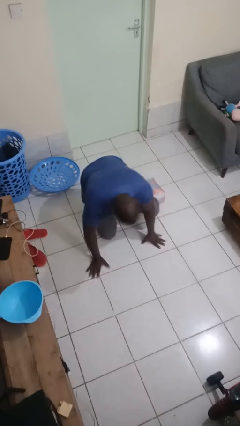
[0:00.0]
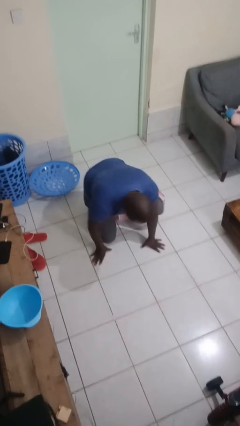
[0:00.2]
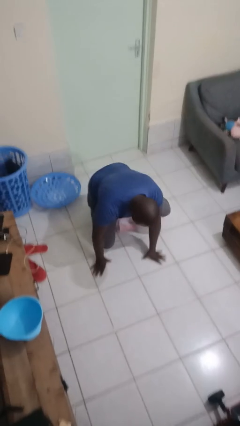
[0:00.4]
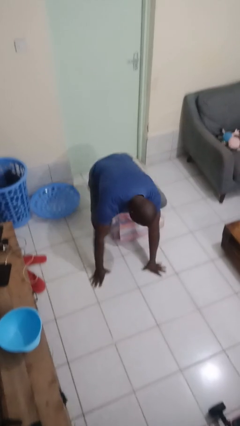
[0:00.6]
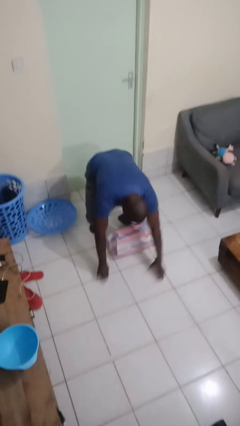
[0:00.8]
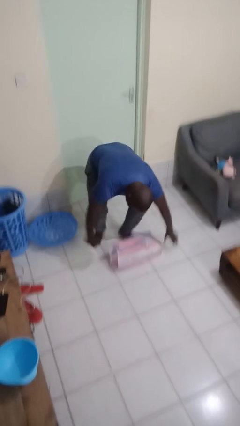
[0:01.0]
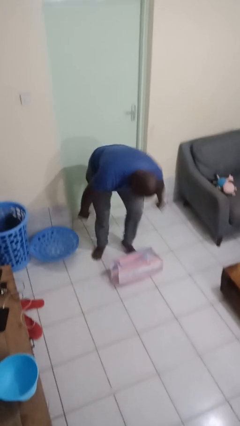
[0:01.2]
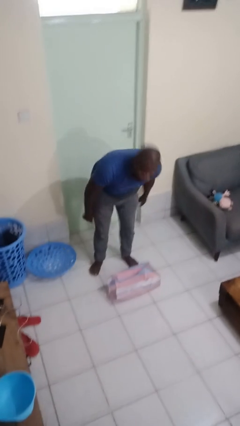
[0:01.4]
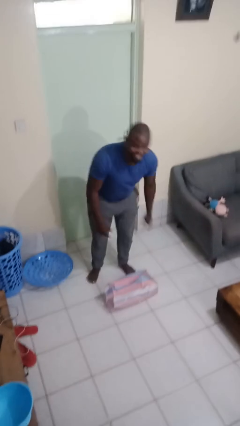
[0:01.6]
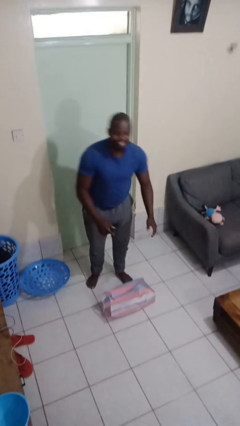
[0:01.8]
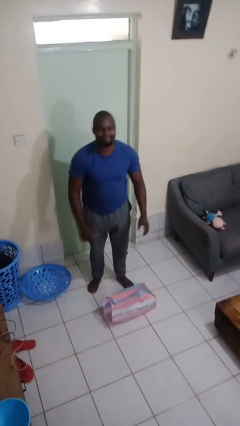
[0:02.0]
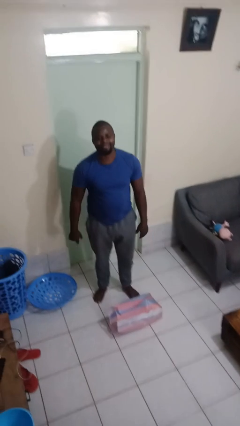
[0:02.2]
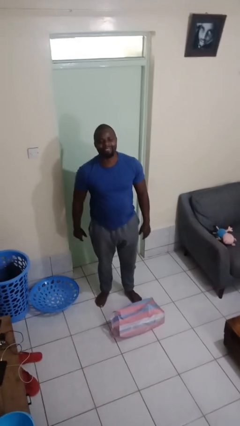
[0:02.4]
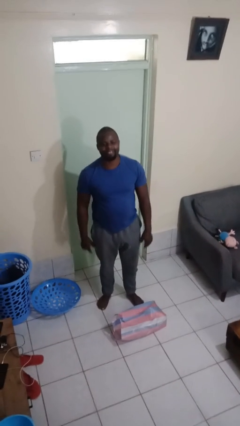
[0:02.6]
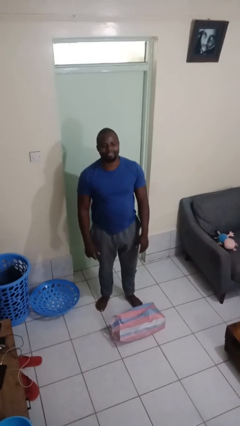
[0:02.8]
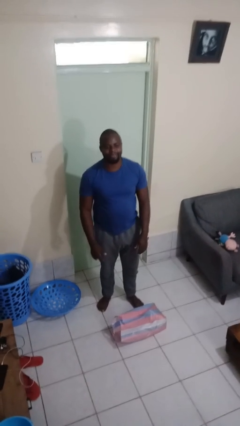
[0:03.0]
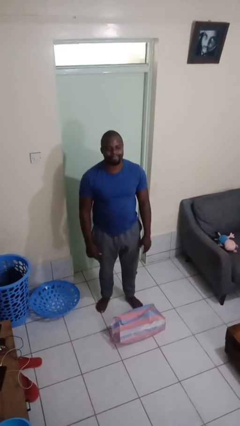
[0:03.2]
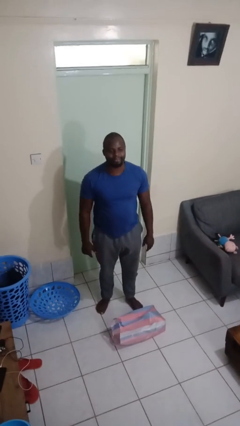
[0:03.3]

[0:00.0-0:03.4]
person stands up from floor

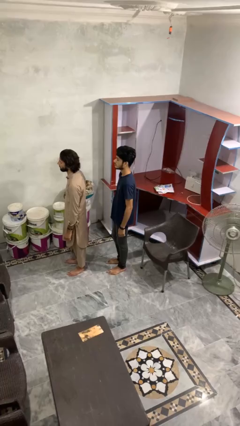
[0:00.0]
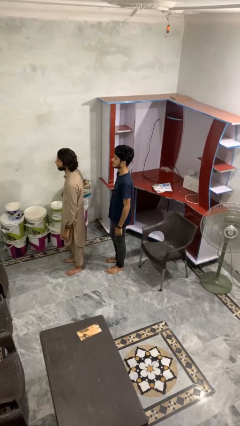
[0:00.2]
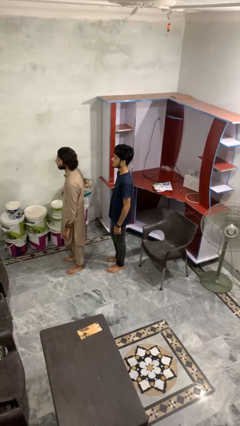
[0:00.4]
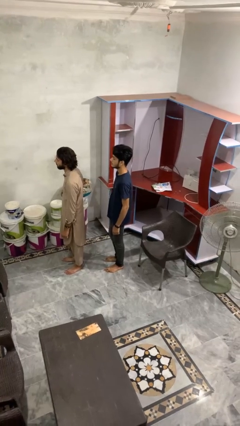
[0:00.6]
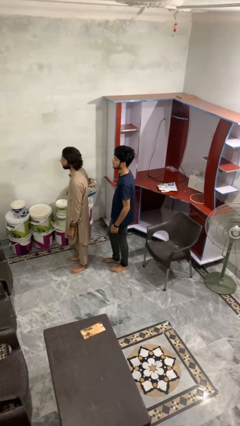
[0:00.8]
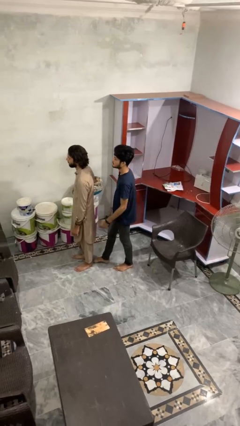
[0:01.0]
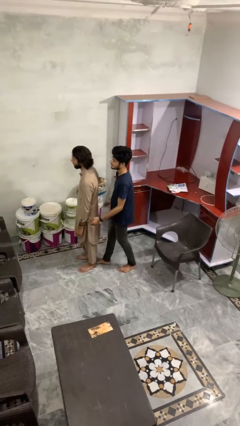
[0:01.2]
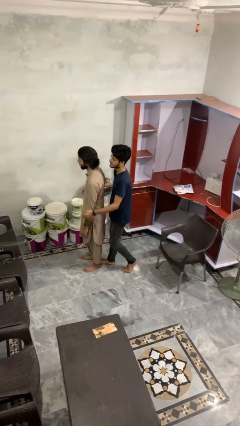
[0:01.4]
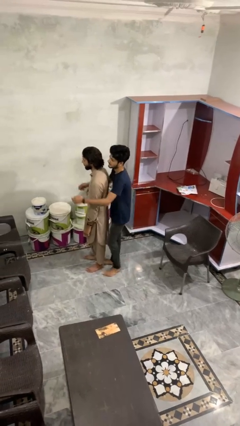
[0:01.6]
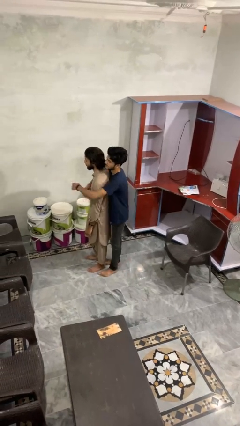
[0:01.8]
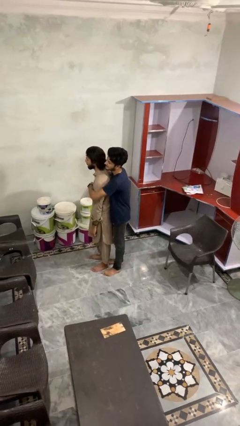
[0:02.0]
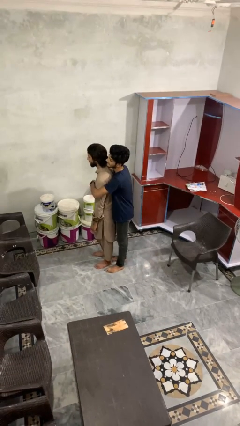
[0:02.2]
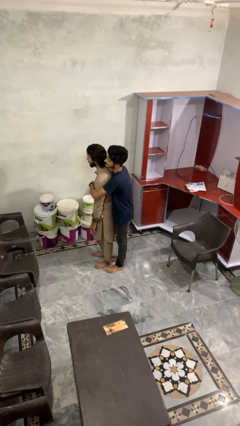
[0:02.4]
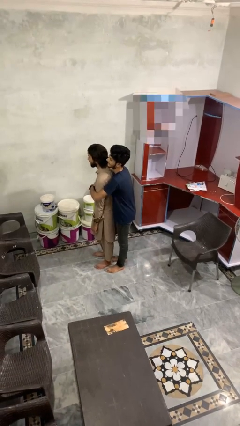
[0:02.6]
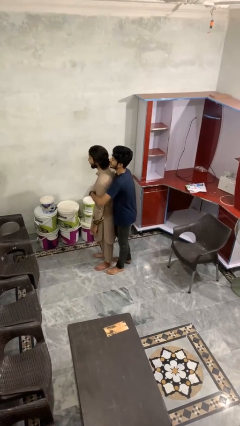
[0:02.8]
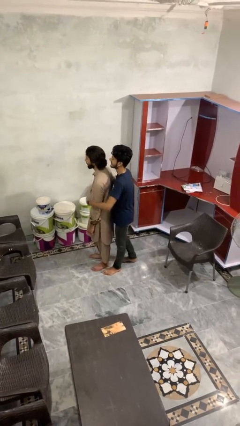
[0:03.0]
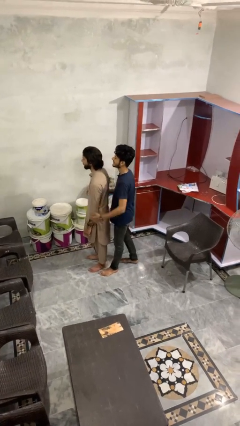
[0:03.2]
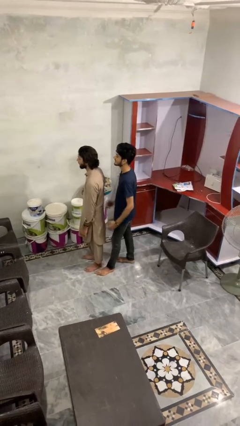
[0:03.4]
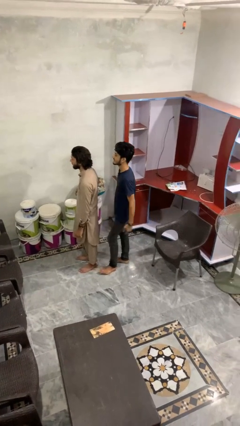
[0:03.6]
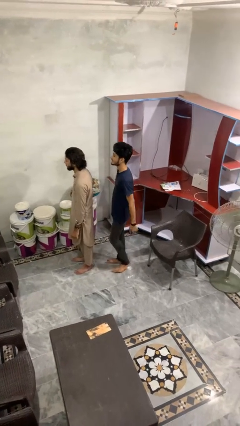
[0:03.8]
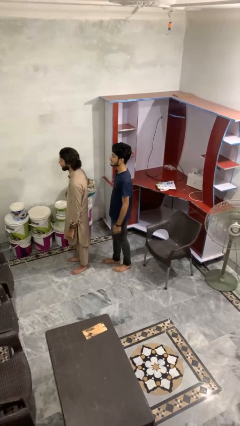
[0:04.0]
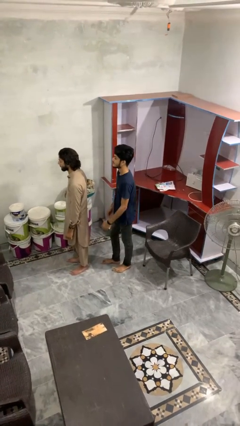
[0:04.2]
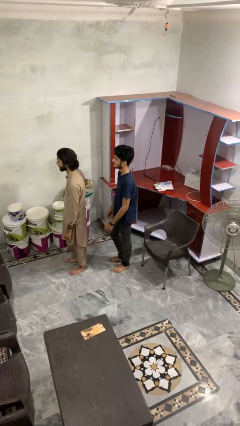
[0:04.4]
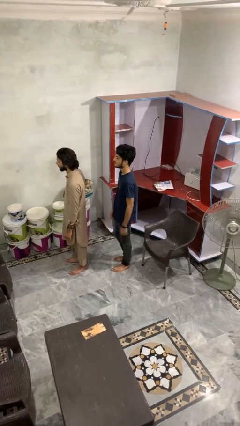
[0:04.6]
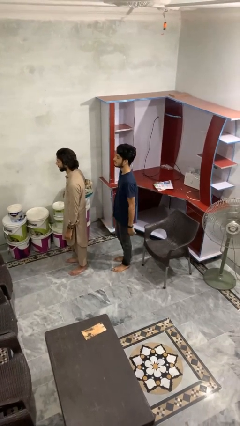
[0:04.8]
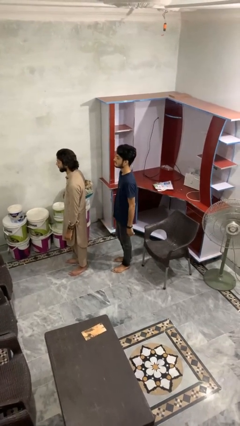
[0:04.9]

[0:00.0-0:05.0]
person hugs person from behind

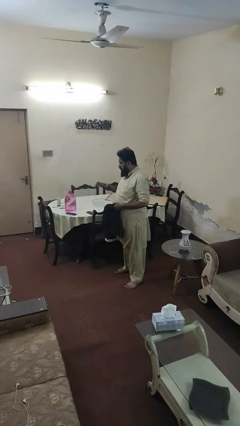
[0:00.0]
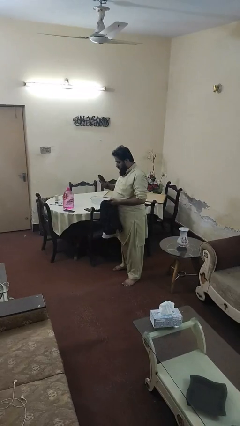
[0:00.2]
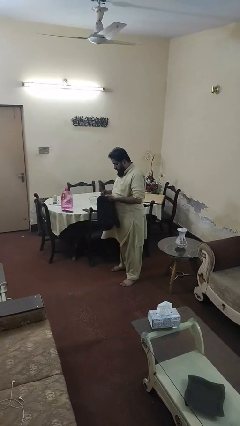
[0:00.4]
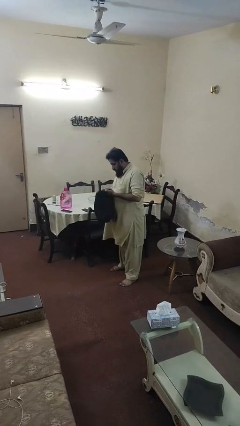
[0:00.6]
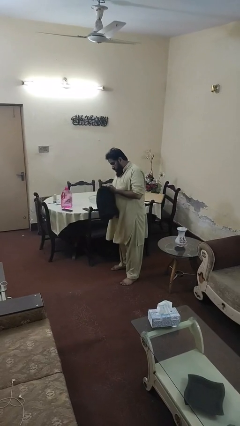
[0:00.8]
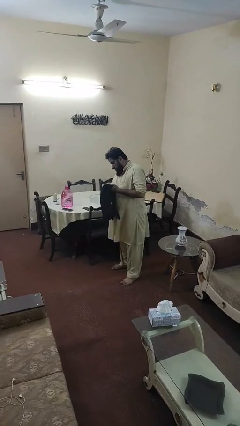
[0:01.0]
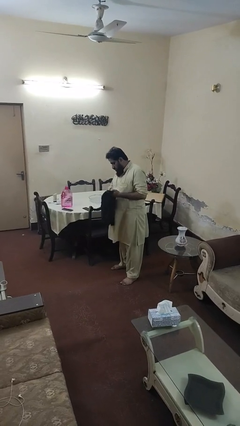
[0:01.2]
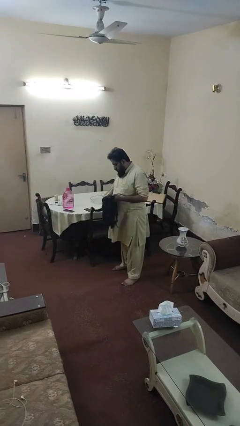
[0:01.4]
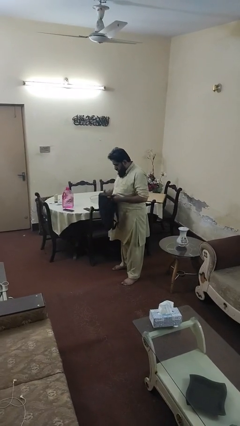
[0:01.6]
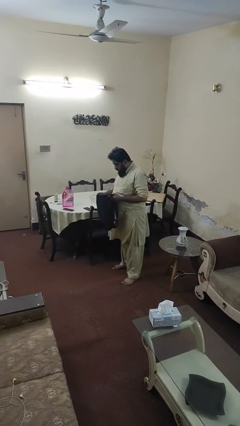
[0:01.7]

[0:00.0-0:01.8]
person puts object into backpack

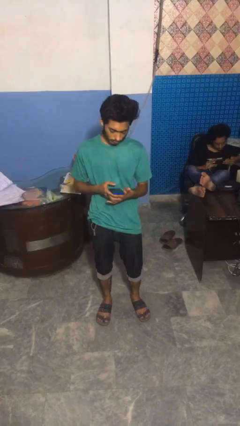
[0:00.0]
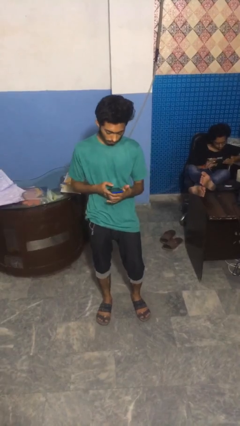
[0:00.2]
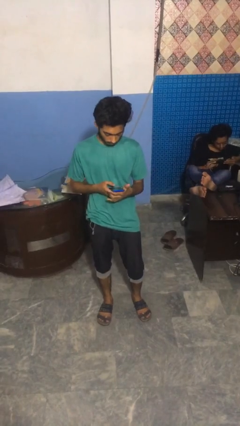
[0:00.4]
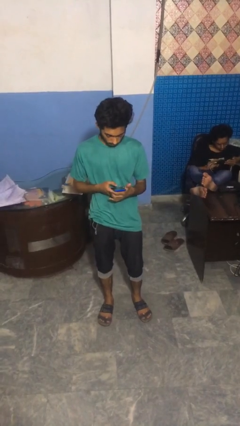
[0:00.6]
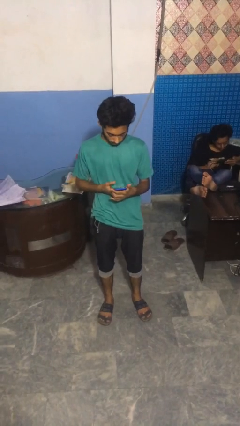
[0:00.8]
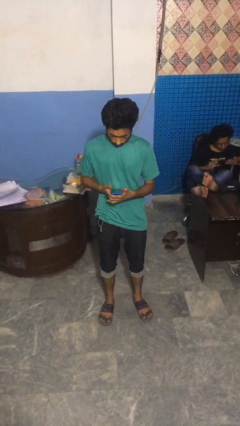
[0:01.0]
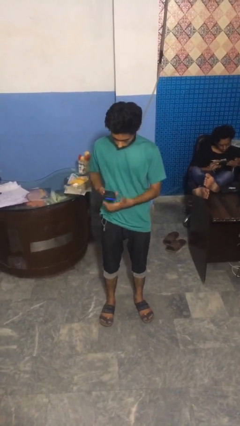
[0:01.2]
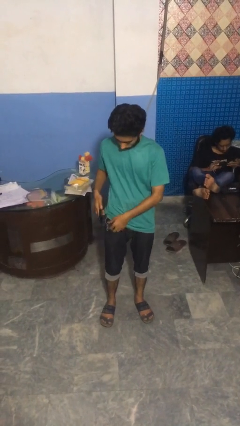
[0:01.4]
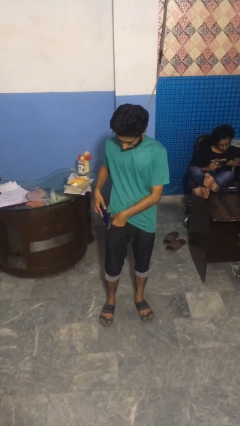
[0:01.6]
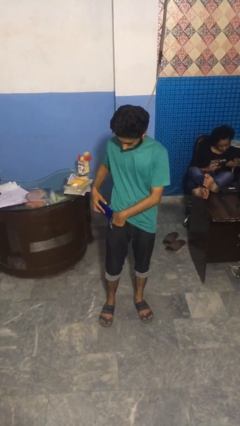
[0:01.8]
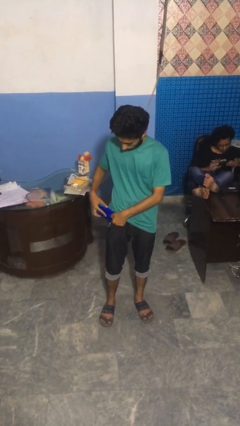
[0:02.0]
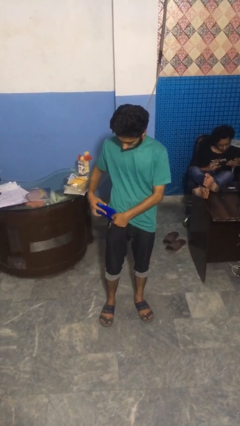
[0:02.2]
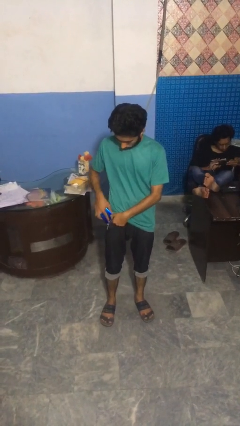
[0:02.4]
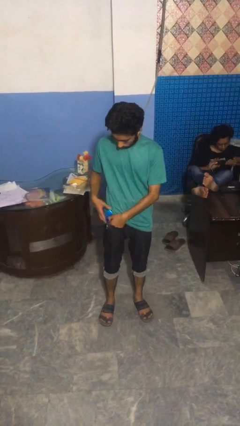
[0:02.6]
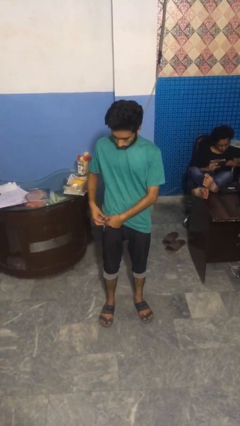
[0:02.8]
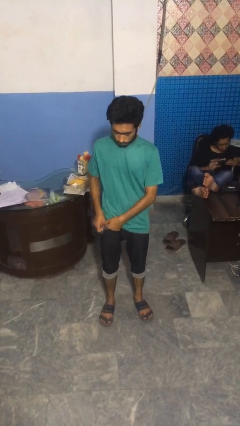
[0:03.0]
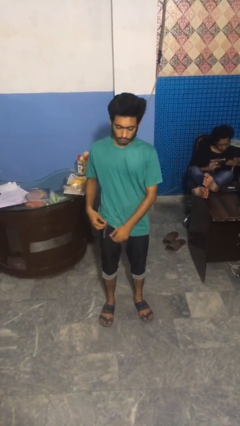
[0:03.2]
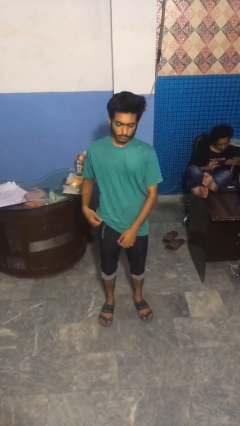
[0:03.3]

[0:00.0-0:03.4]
person puts phone into pocket

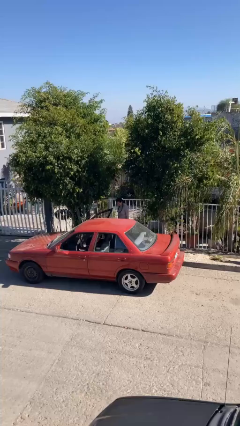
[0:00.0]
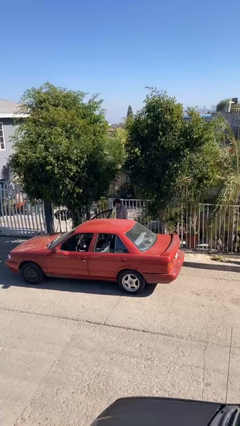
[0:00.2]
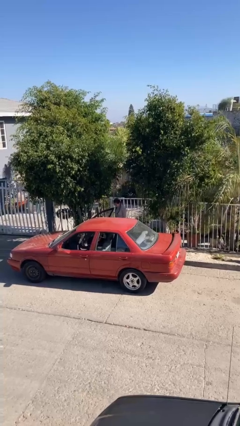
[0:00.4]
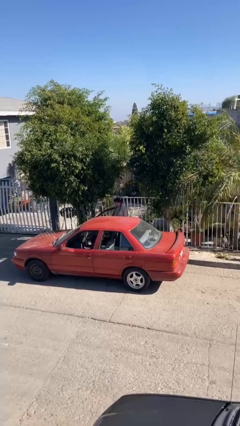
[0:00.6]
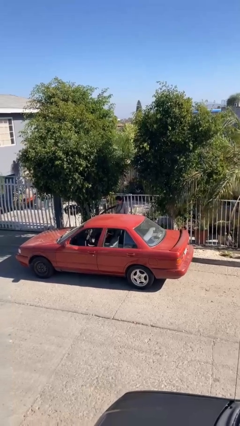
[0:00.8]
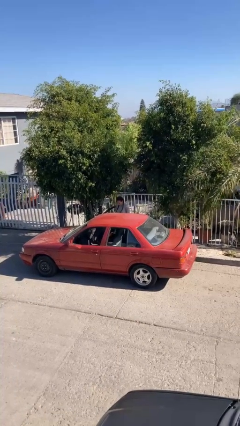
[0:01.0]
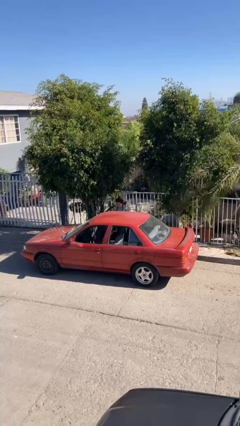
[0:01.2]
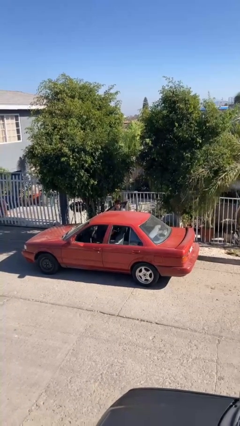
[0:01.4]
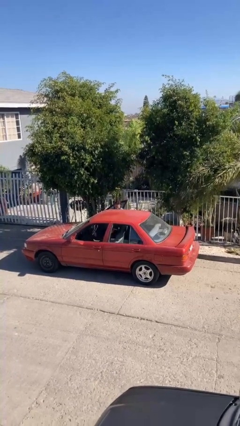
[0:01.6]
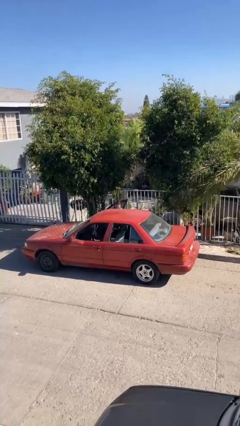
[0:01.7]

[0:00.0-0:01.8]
person unloads car

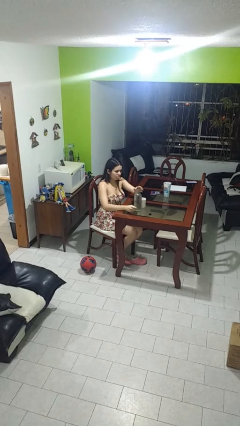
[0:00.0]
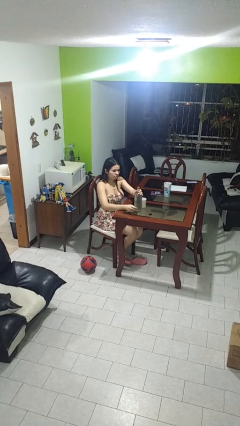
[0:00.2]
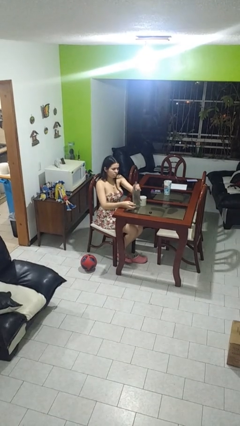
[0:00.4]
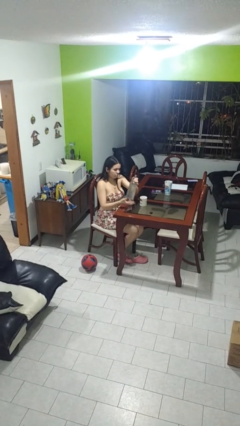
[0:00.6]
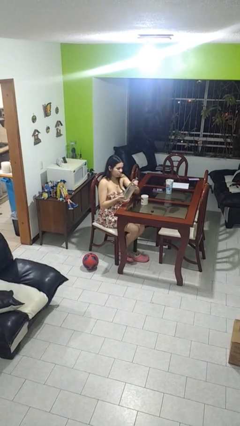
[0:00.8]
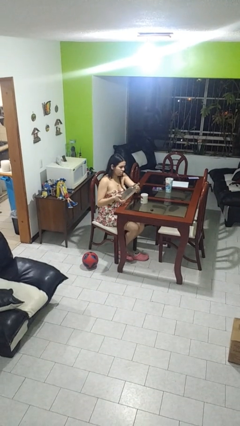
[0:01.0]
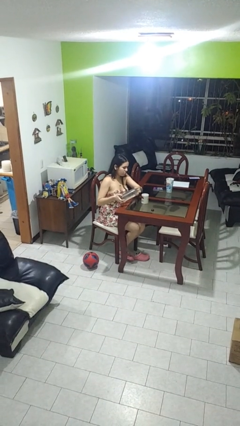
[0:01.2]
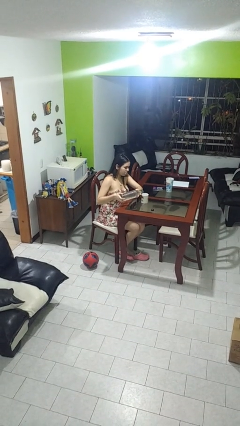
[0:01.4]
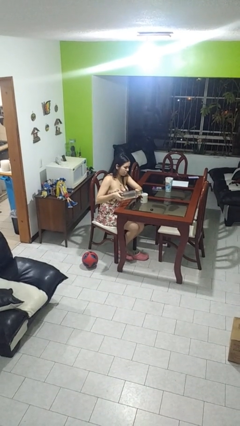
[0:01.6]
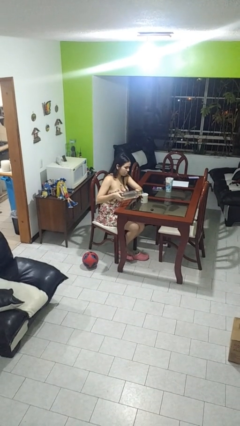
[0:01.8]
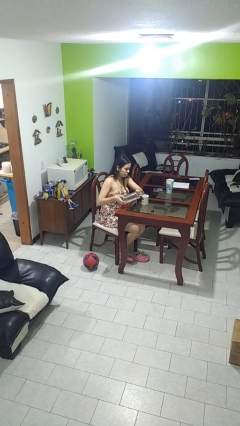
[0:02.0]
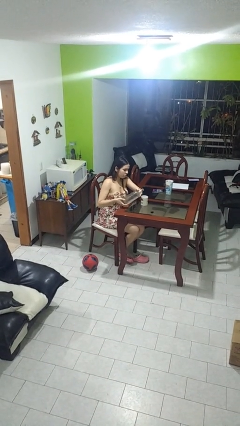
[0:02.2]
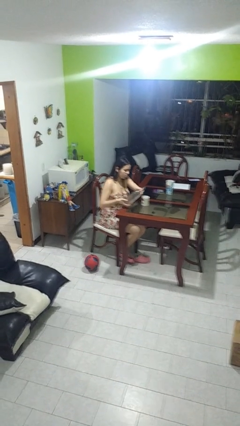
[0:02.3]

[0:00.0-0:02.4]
person pours liquid into cup
